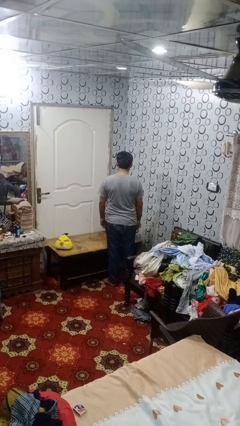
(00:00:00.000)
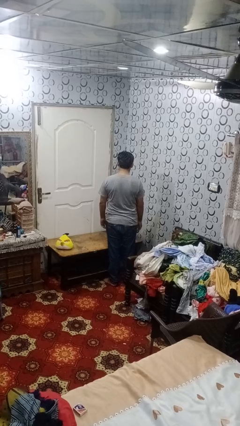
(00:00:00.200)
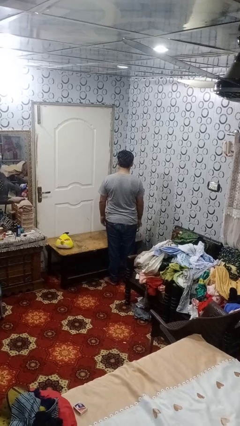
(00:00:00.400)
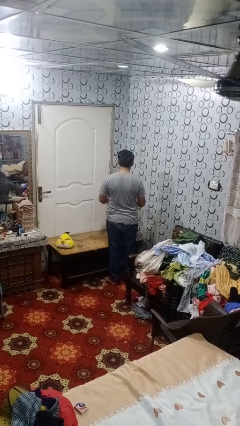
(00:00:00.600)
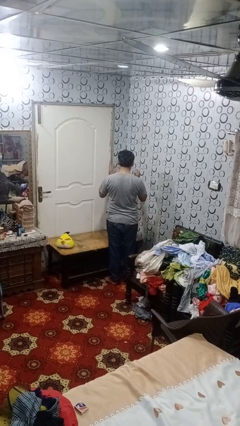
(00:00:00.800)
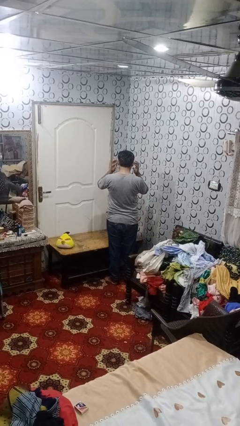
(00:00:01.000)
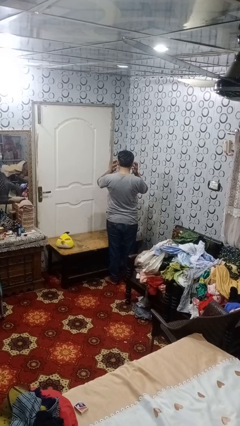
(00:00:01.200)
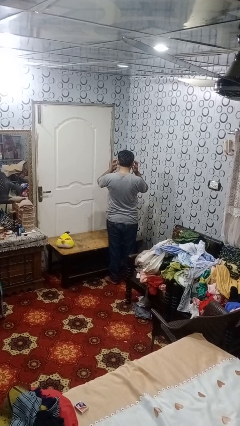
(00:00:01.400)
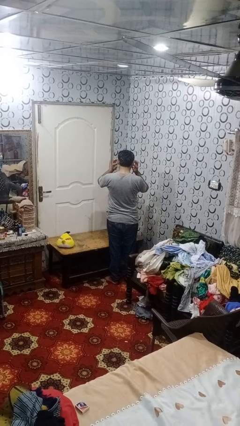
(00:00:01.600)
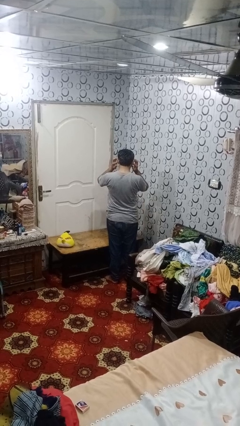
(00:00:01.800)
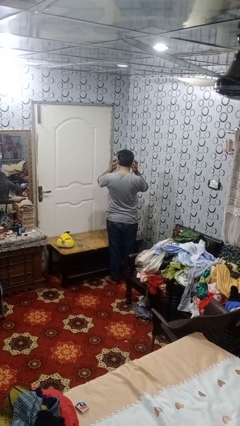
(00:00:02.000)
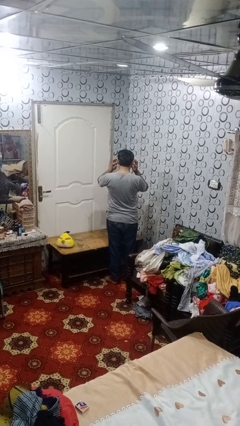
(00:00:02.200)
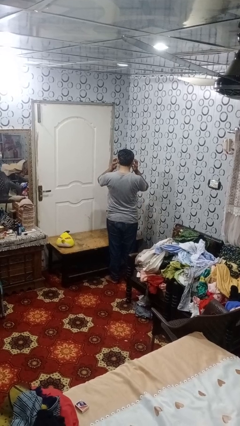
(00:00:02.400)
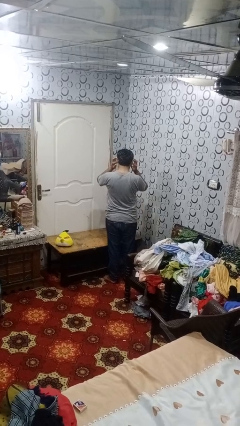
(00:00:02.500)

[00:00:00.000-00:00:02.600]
person puts fingers in ear

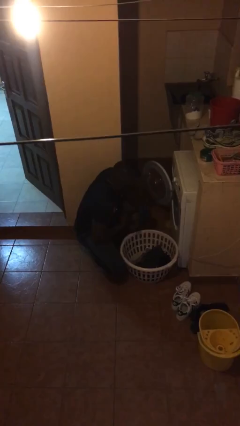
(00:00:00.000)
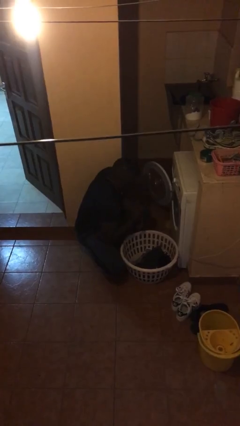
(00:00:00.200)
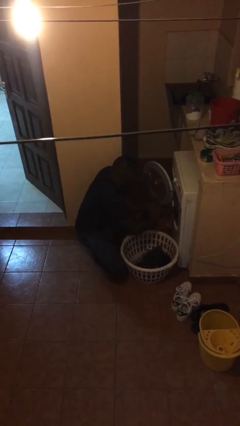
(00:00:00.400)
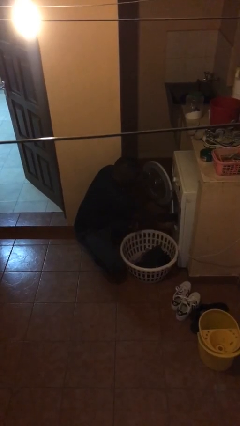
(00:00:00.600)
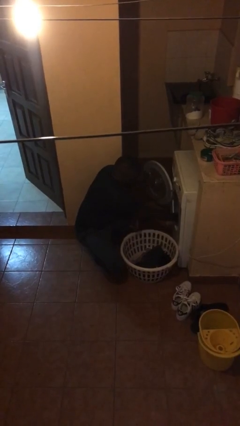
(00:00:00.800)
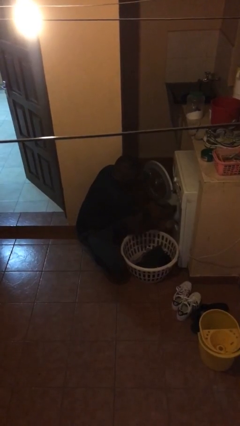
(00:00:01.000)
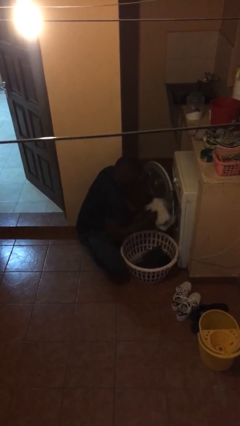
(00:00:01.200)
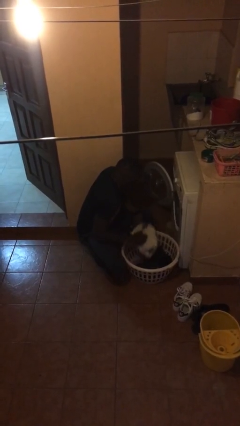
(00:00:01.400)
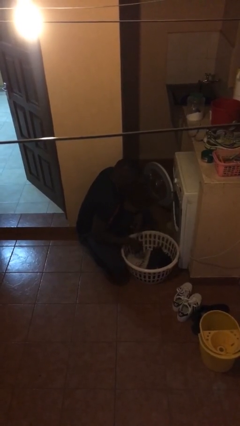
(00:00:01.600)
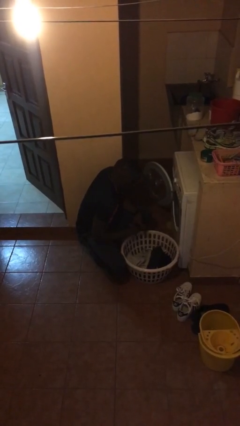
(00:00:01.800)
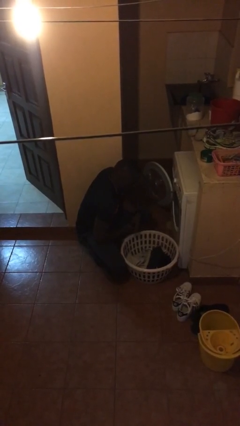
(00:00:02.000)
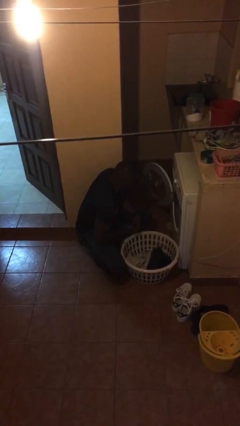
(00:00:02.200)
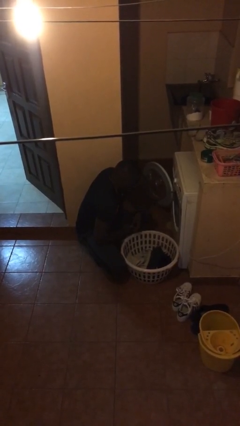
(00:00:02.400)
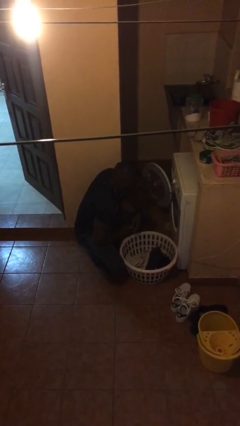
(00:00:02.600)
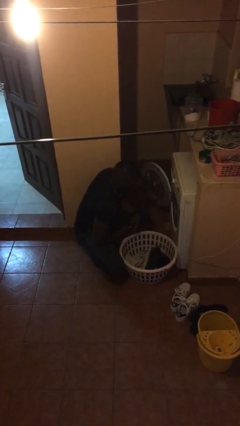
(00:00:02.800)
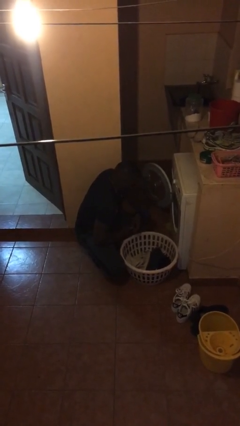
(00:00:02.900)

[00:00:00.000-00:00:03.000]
person unloads clotheswasher

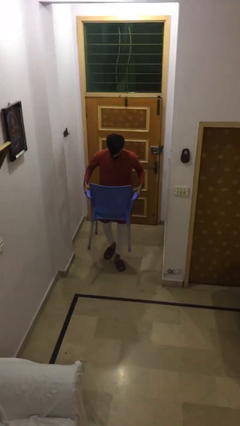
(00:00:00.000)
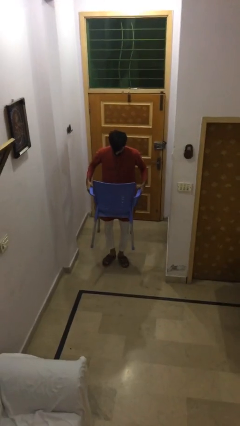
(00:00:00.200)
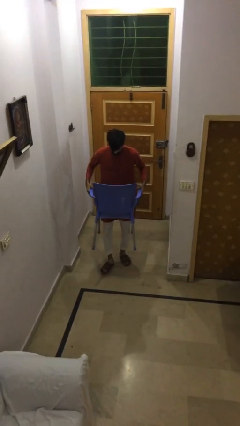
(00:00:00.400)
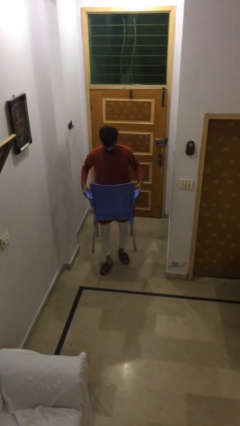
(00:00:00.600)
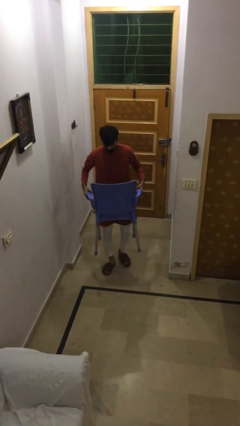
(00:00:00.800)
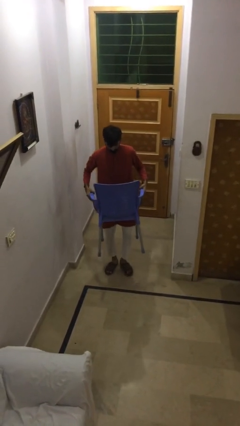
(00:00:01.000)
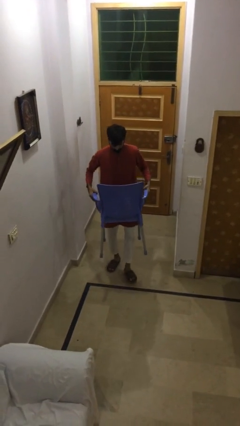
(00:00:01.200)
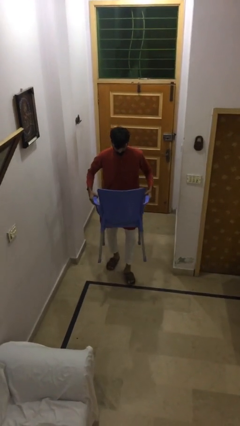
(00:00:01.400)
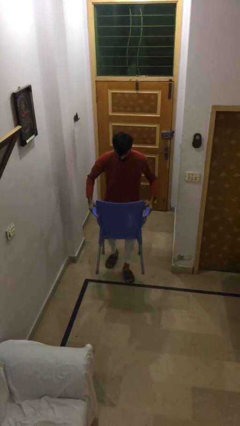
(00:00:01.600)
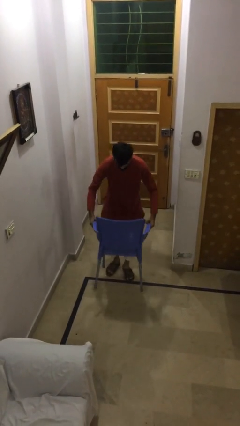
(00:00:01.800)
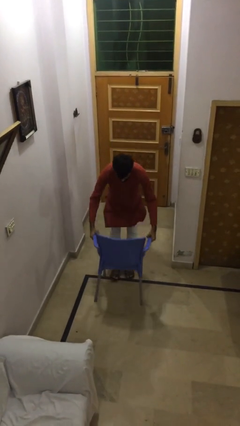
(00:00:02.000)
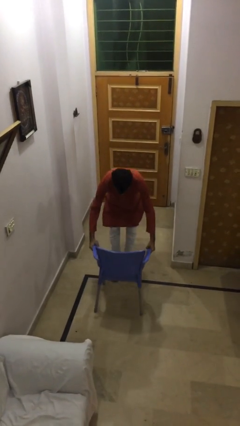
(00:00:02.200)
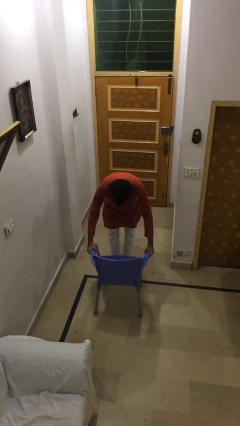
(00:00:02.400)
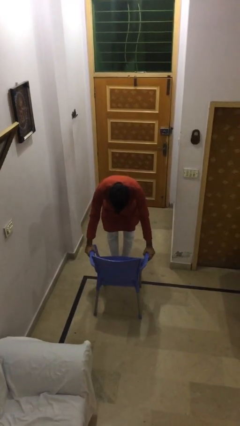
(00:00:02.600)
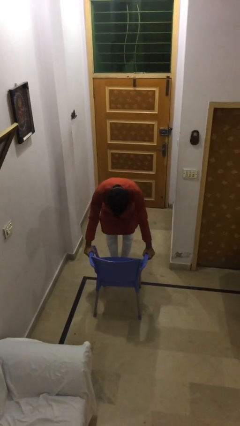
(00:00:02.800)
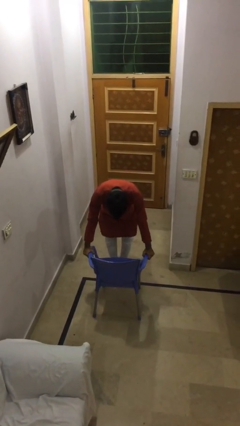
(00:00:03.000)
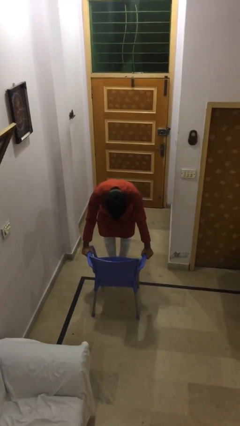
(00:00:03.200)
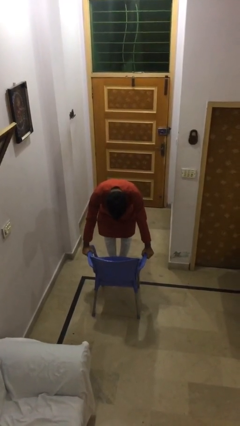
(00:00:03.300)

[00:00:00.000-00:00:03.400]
person puts down object on floor

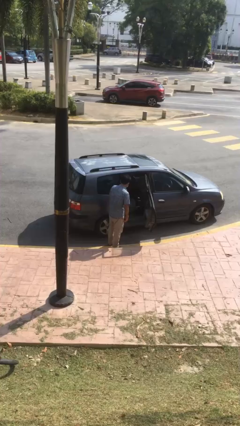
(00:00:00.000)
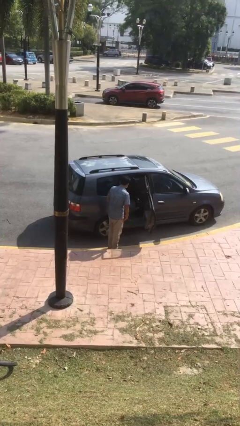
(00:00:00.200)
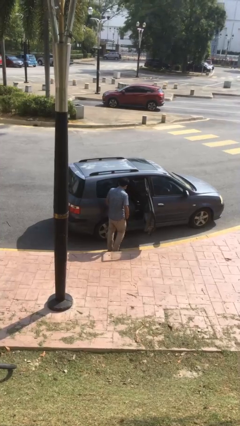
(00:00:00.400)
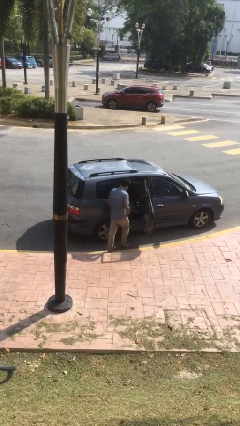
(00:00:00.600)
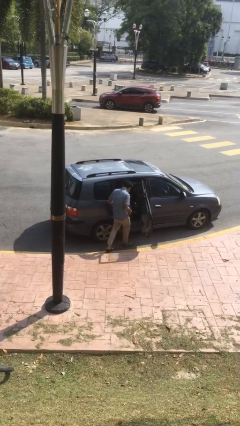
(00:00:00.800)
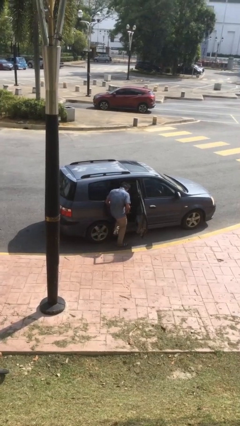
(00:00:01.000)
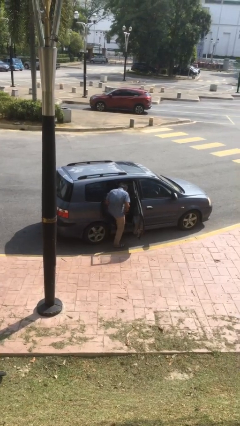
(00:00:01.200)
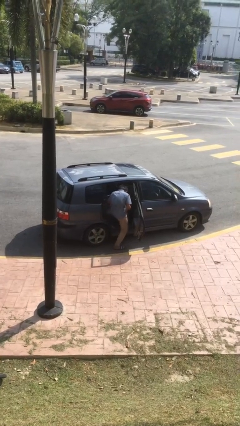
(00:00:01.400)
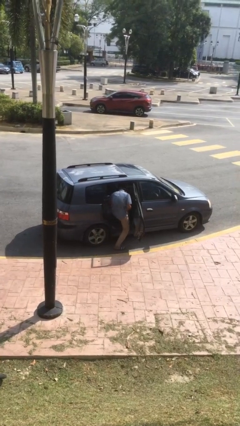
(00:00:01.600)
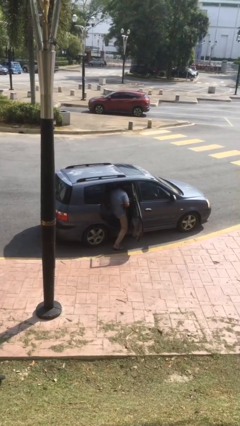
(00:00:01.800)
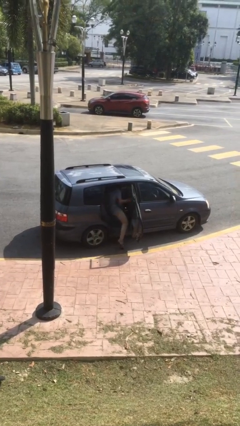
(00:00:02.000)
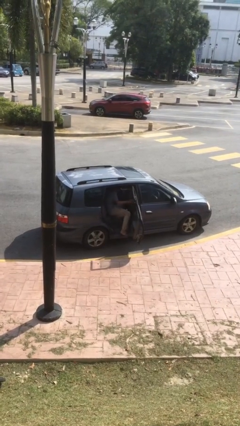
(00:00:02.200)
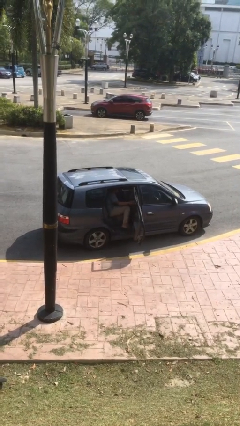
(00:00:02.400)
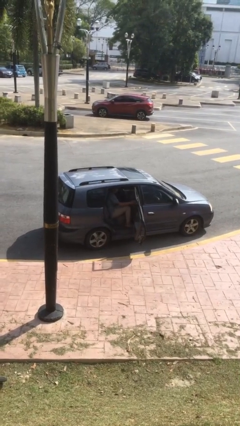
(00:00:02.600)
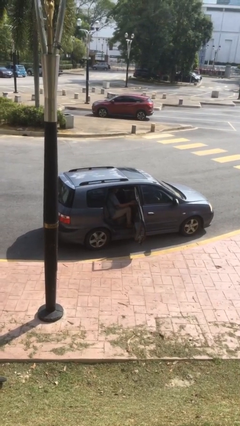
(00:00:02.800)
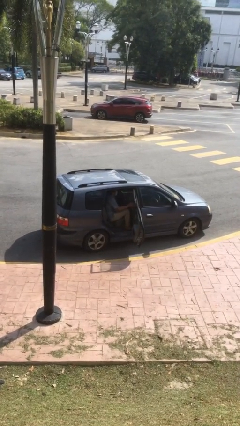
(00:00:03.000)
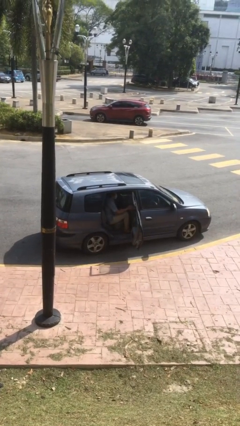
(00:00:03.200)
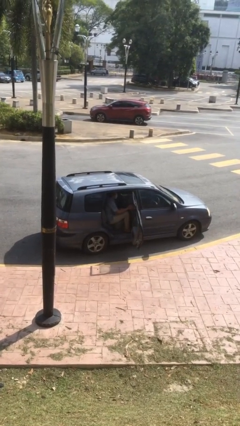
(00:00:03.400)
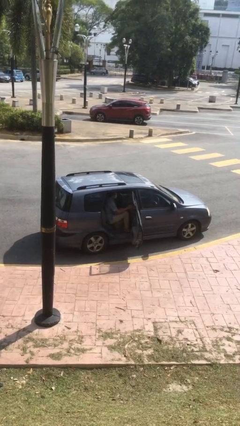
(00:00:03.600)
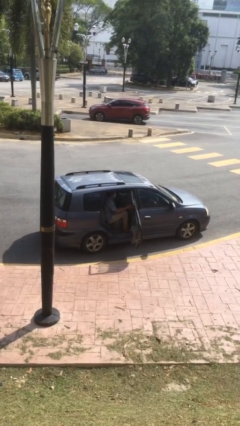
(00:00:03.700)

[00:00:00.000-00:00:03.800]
person enters car

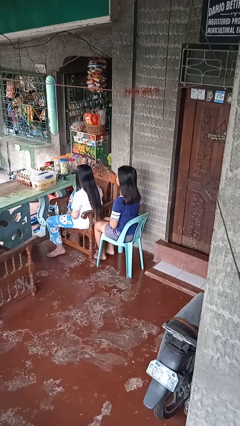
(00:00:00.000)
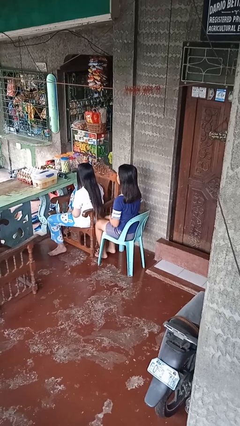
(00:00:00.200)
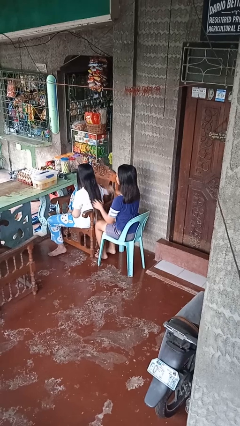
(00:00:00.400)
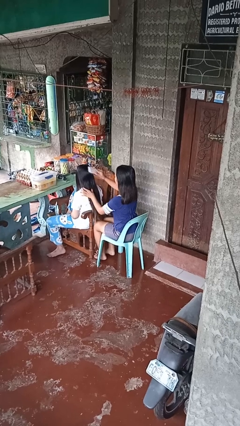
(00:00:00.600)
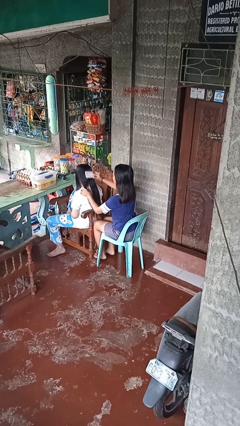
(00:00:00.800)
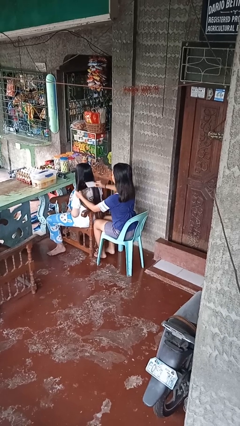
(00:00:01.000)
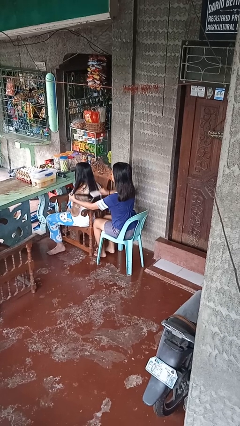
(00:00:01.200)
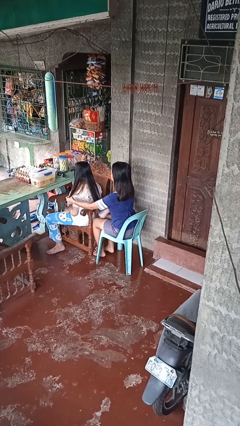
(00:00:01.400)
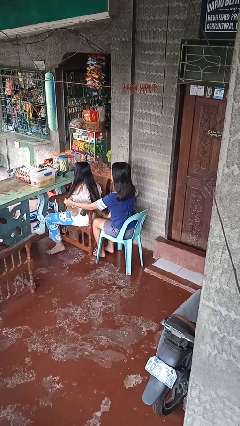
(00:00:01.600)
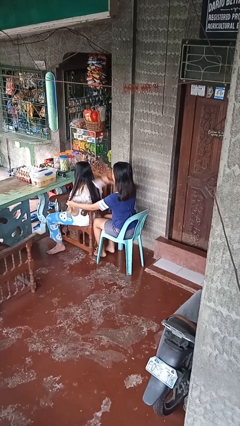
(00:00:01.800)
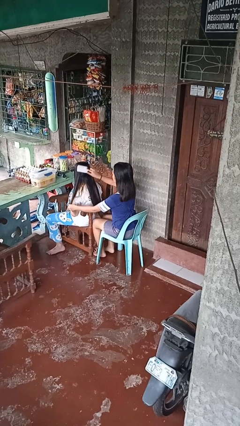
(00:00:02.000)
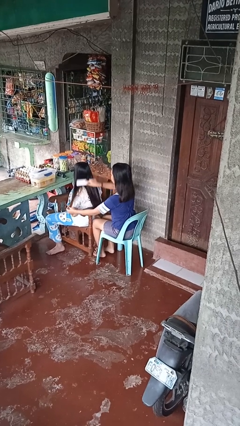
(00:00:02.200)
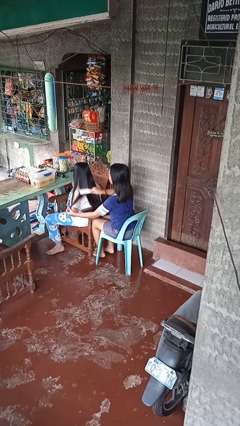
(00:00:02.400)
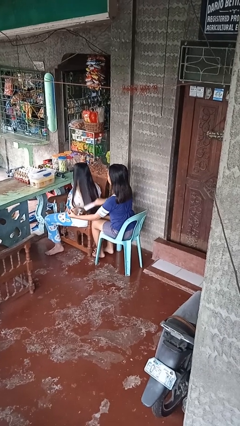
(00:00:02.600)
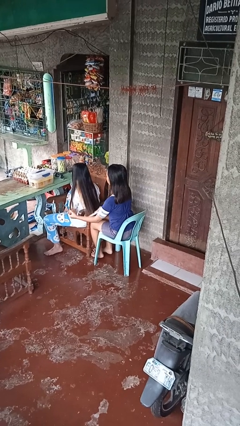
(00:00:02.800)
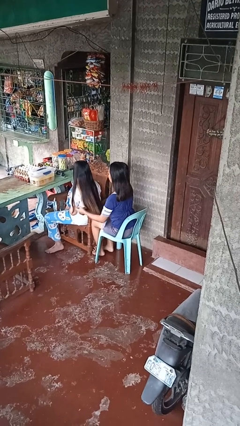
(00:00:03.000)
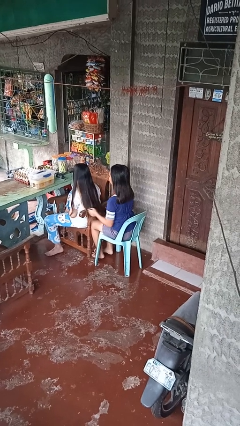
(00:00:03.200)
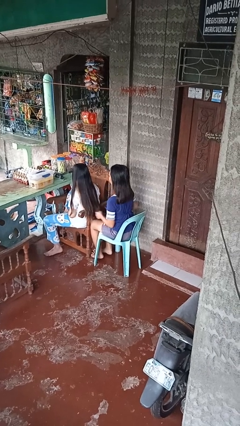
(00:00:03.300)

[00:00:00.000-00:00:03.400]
person brushes hair of person

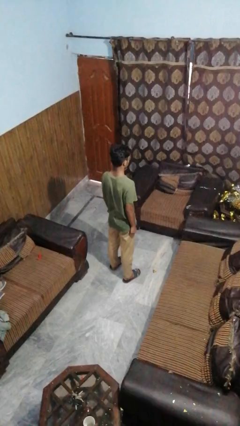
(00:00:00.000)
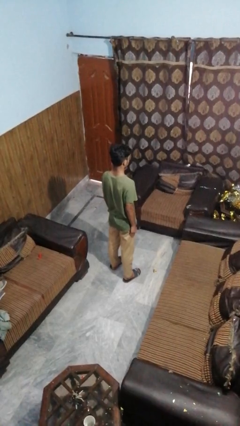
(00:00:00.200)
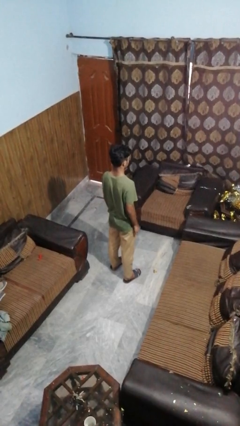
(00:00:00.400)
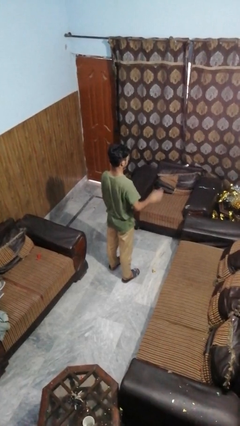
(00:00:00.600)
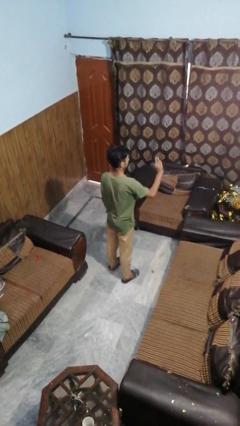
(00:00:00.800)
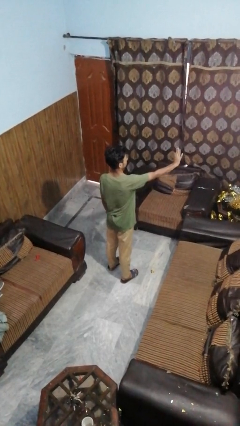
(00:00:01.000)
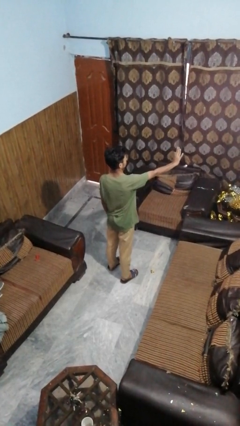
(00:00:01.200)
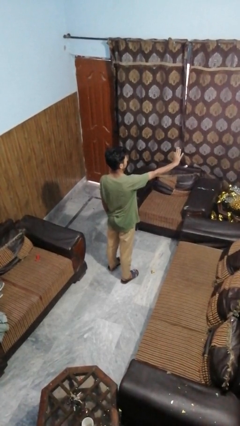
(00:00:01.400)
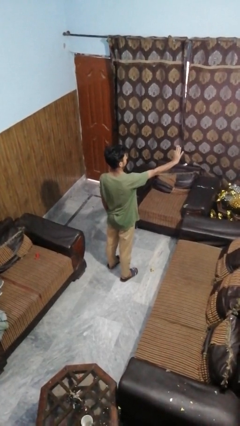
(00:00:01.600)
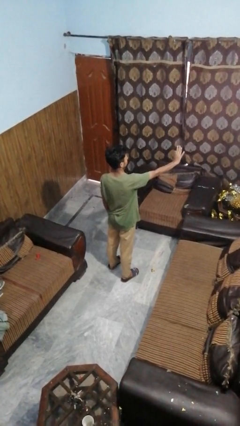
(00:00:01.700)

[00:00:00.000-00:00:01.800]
person gestures stop
